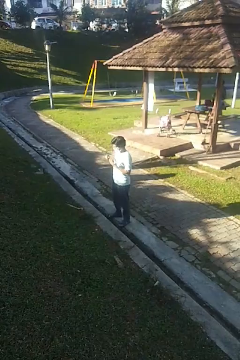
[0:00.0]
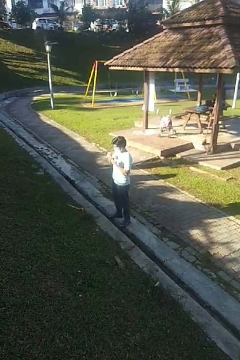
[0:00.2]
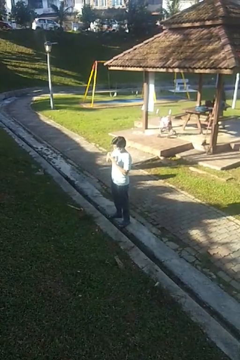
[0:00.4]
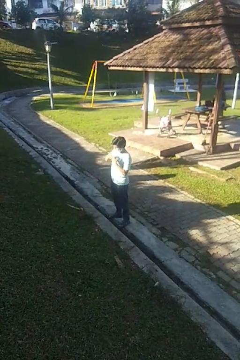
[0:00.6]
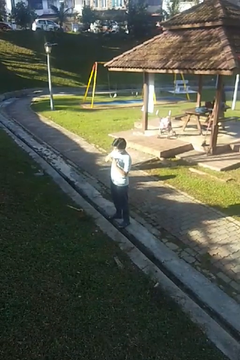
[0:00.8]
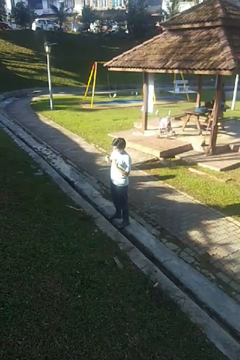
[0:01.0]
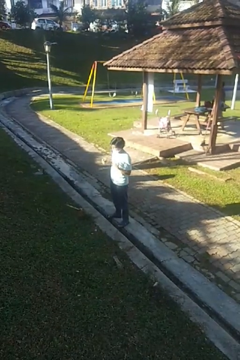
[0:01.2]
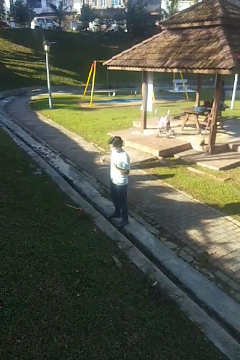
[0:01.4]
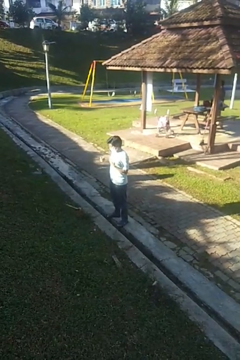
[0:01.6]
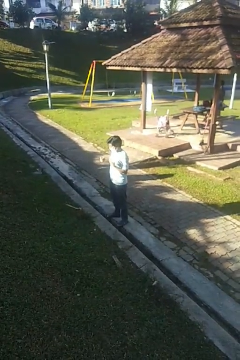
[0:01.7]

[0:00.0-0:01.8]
person puts on ring

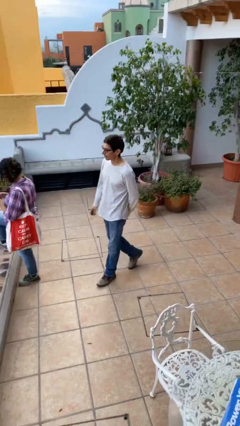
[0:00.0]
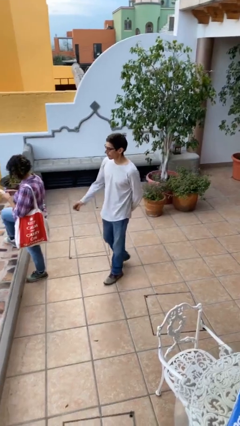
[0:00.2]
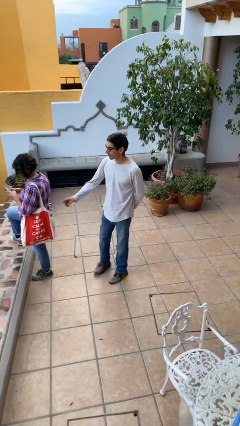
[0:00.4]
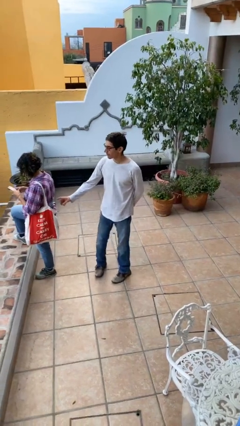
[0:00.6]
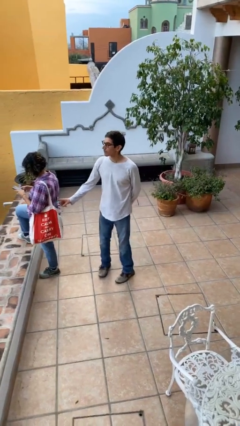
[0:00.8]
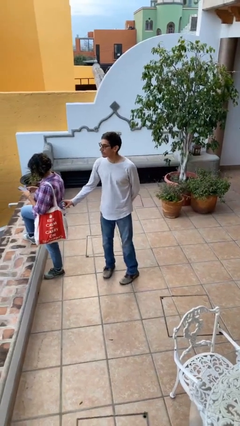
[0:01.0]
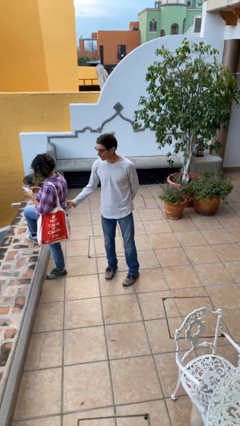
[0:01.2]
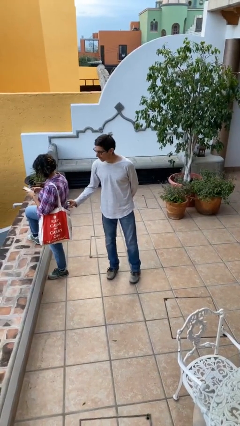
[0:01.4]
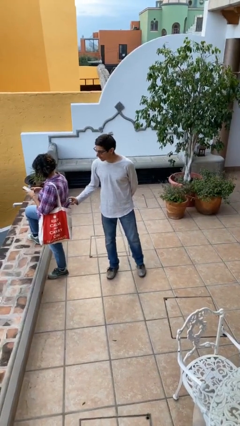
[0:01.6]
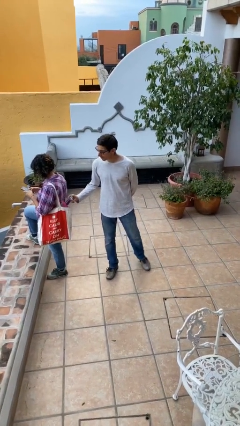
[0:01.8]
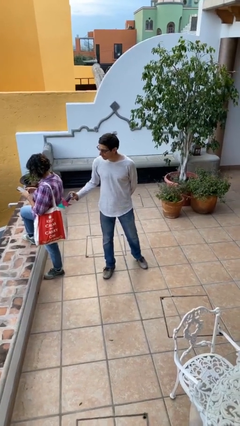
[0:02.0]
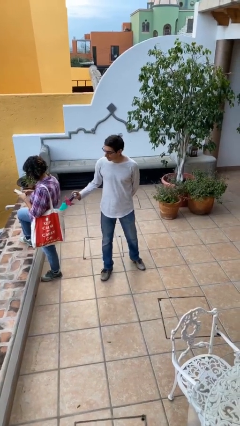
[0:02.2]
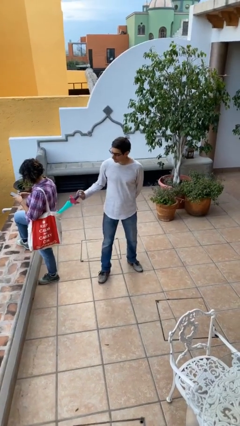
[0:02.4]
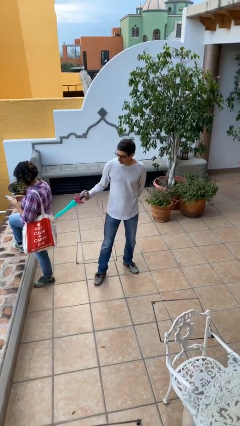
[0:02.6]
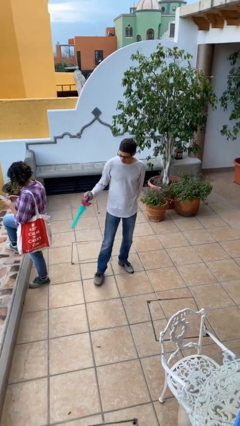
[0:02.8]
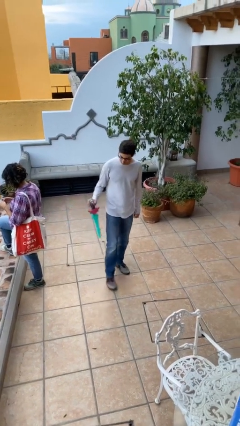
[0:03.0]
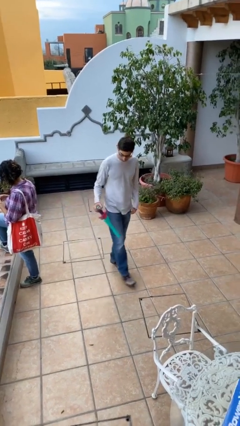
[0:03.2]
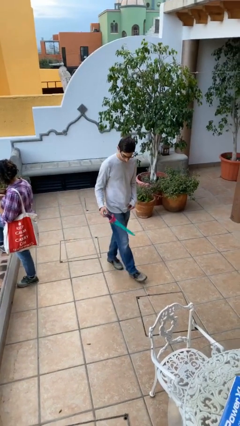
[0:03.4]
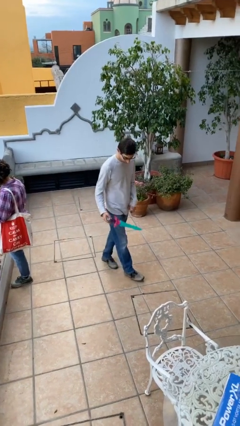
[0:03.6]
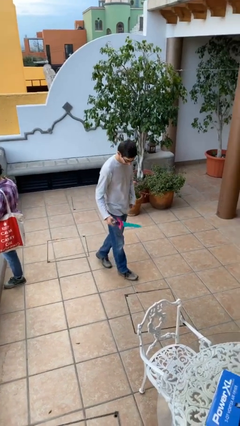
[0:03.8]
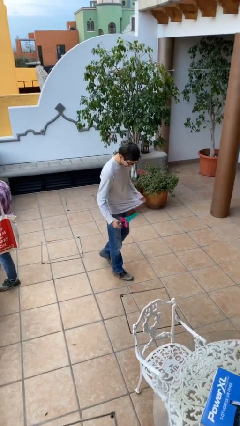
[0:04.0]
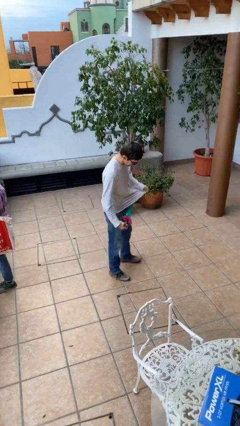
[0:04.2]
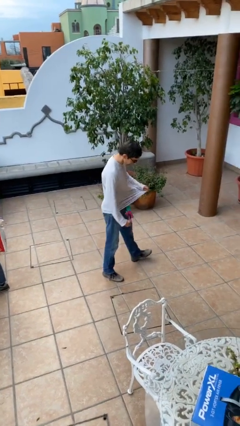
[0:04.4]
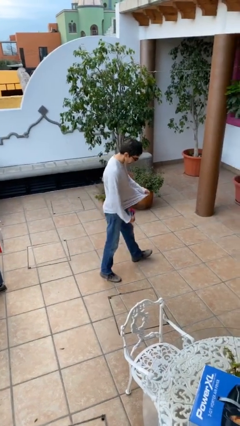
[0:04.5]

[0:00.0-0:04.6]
person steals object from person

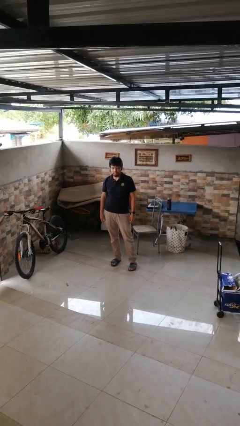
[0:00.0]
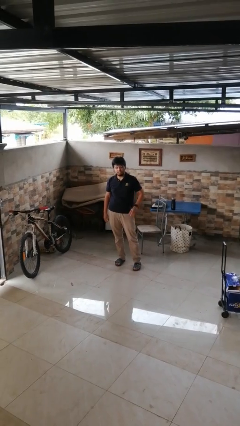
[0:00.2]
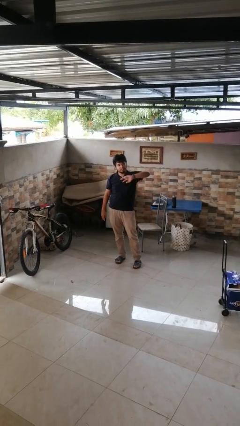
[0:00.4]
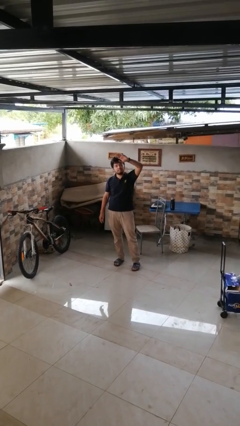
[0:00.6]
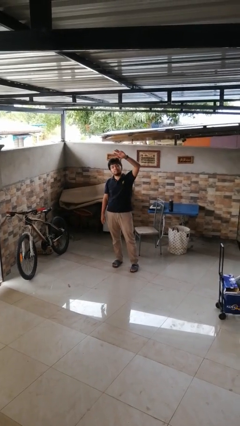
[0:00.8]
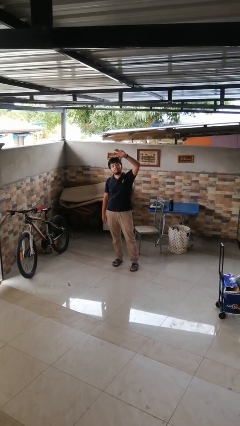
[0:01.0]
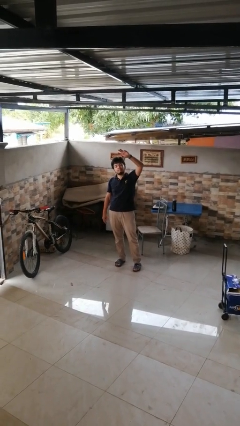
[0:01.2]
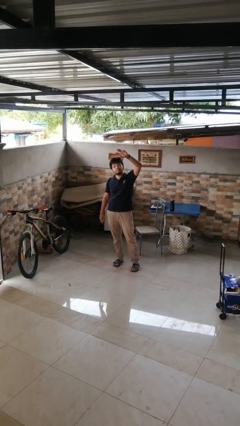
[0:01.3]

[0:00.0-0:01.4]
person gestures swipe up

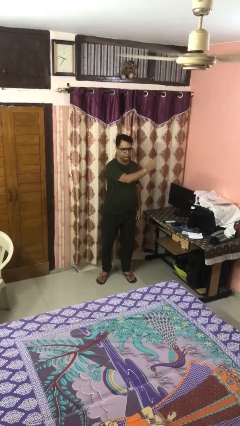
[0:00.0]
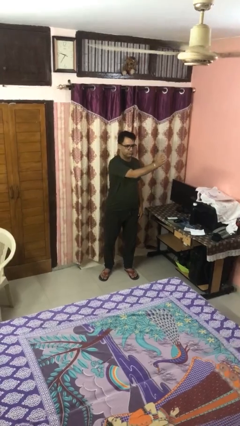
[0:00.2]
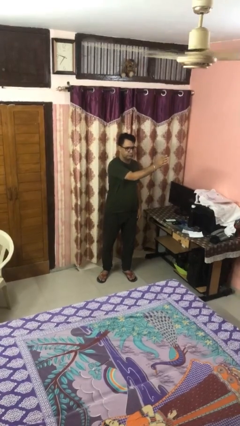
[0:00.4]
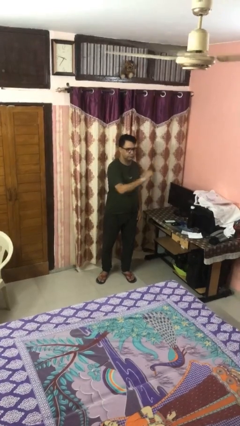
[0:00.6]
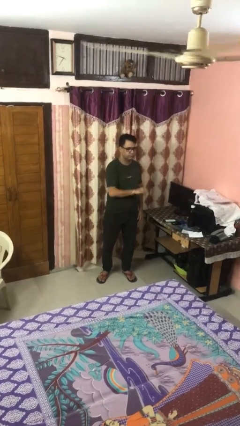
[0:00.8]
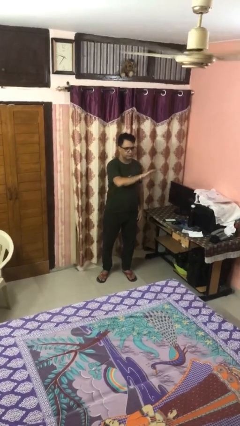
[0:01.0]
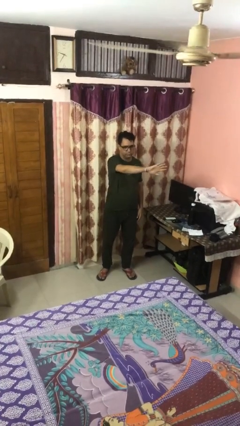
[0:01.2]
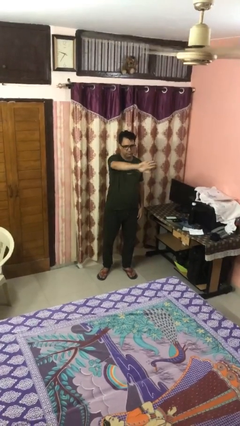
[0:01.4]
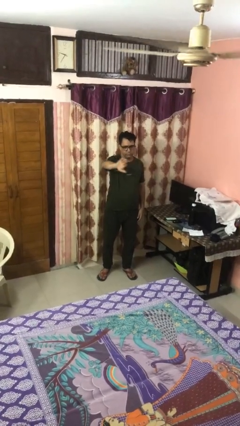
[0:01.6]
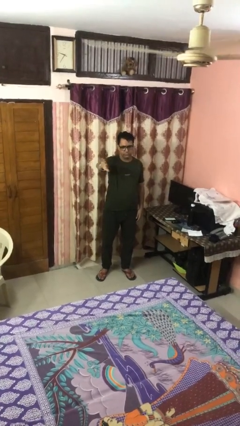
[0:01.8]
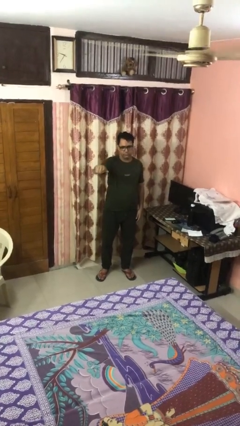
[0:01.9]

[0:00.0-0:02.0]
person gestures swipe right

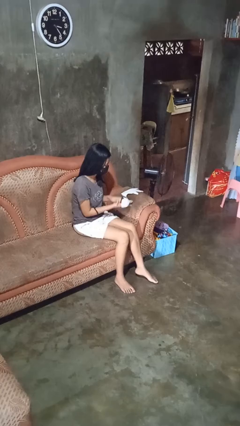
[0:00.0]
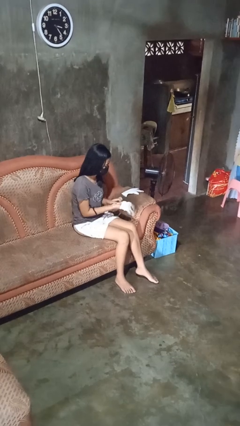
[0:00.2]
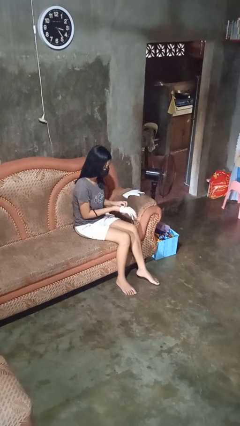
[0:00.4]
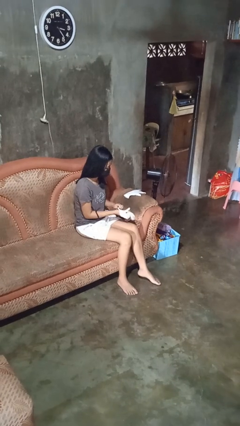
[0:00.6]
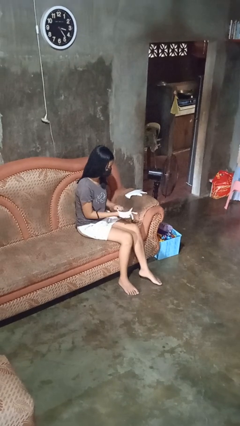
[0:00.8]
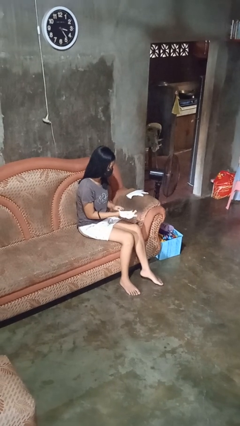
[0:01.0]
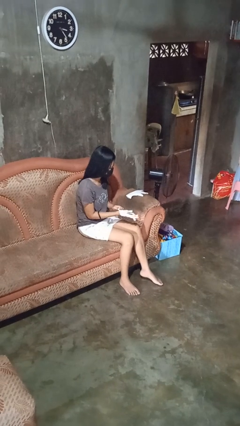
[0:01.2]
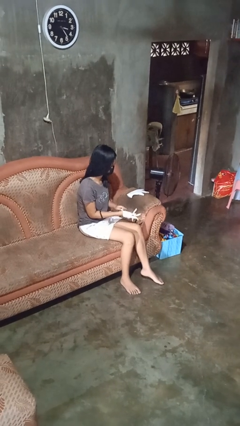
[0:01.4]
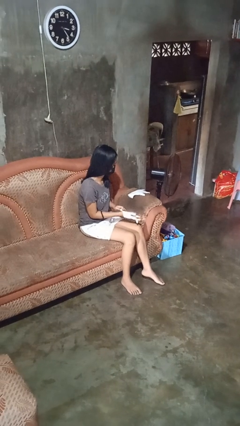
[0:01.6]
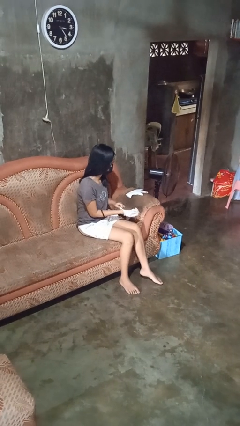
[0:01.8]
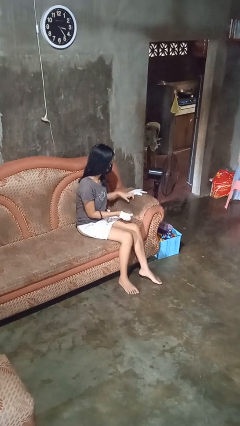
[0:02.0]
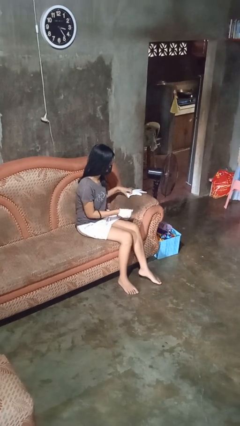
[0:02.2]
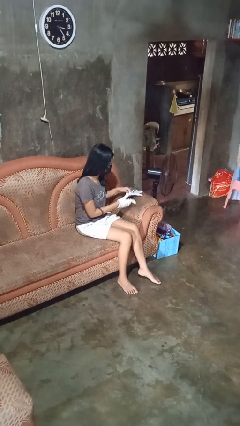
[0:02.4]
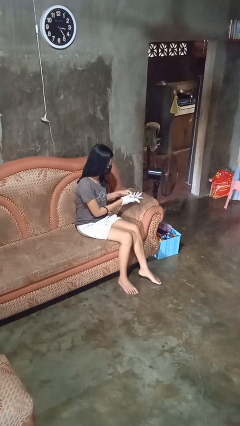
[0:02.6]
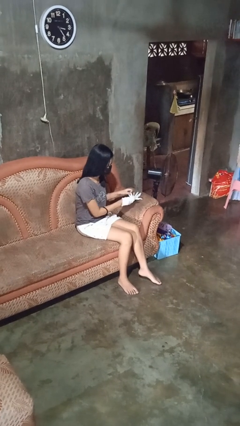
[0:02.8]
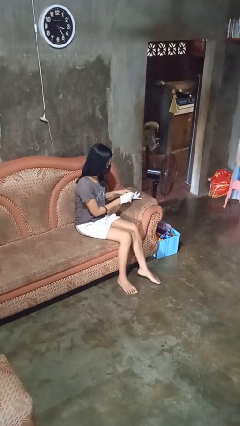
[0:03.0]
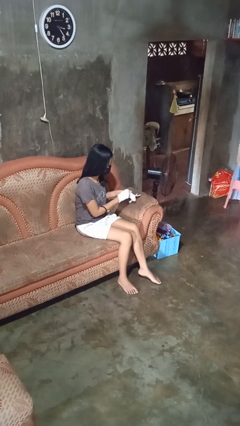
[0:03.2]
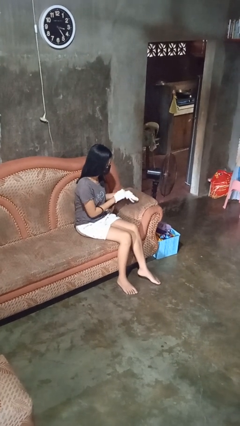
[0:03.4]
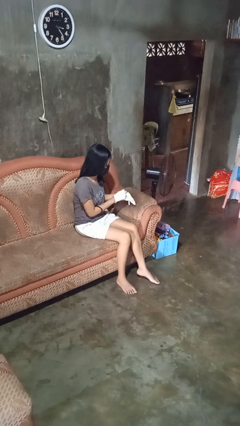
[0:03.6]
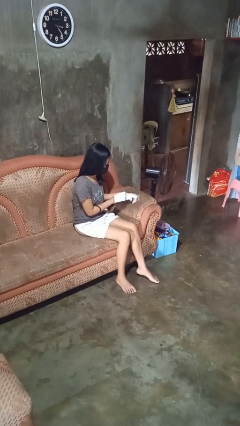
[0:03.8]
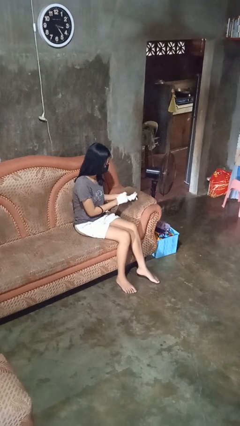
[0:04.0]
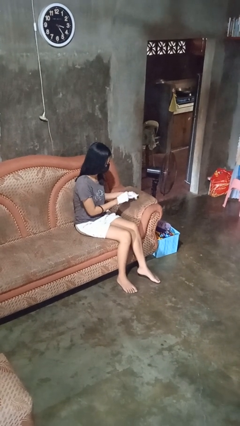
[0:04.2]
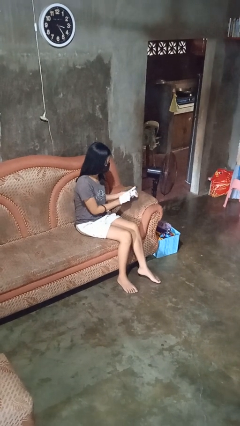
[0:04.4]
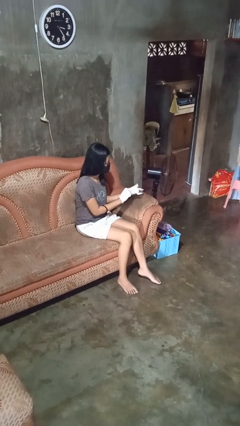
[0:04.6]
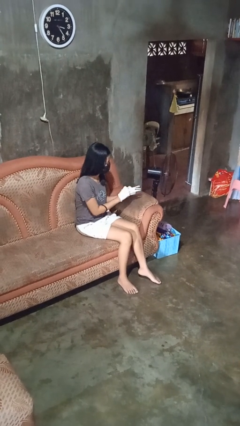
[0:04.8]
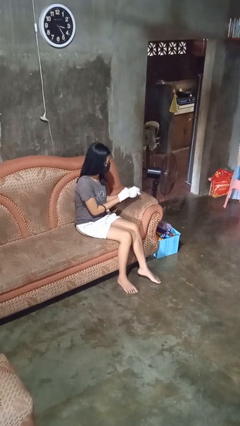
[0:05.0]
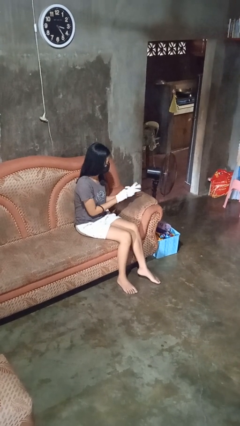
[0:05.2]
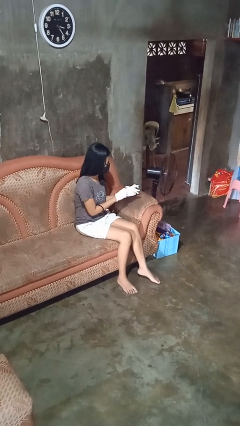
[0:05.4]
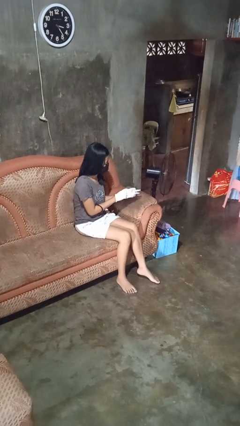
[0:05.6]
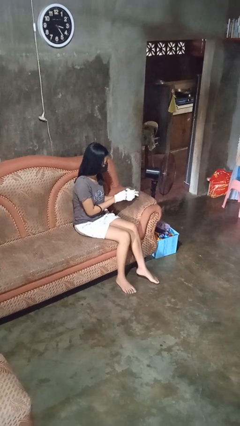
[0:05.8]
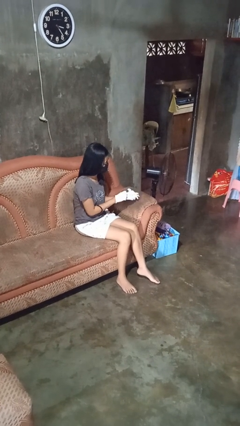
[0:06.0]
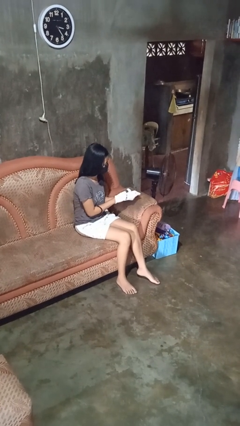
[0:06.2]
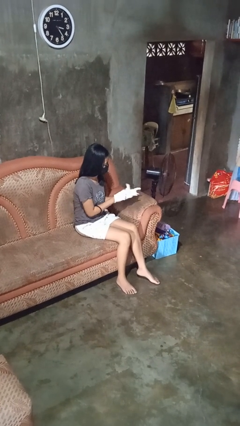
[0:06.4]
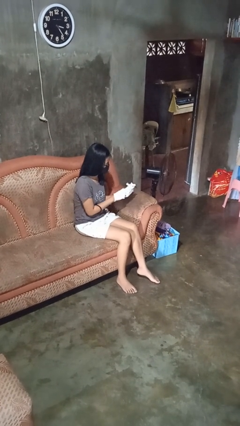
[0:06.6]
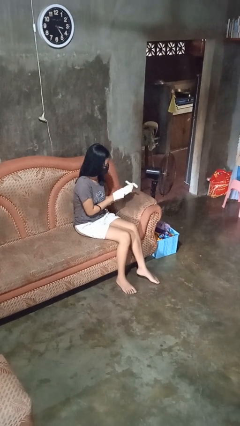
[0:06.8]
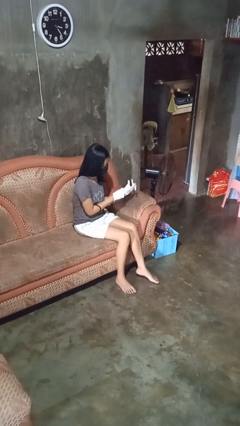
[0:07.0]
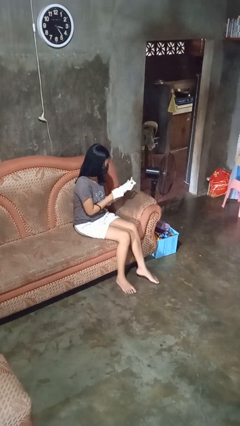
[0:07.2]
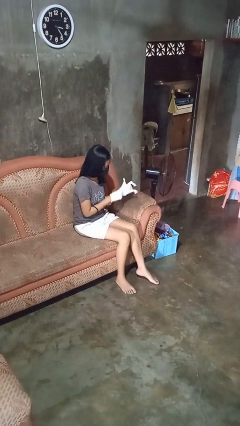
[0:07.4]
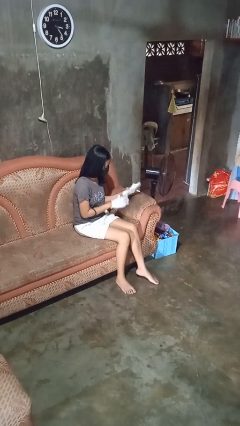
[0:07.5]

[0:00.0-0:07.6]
person puts on gloves

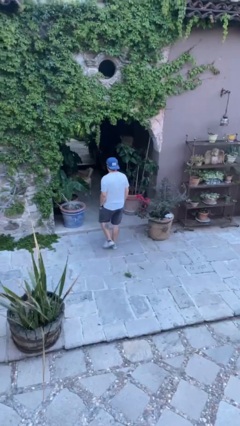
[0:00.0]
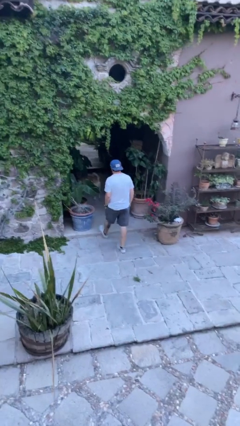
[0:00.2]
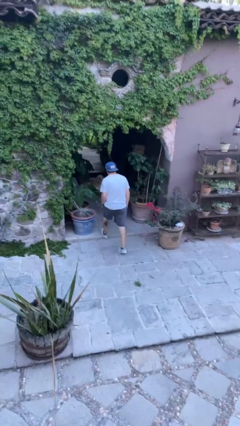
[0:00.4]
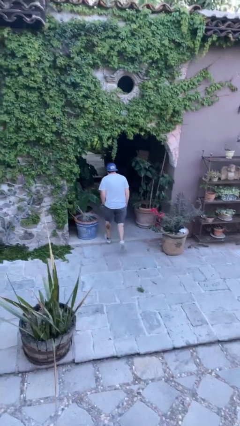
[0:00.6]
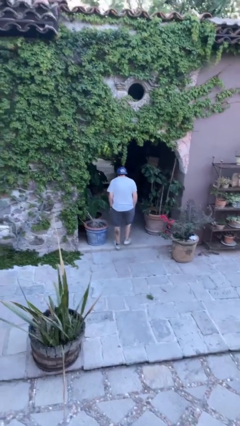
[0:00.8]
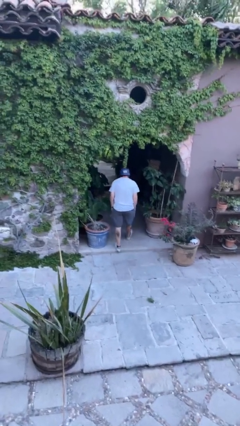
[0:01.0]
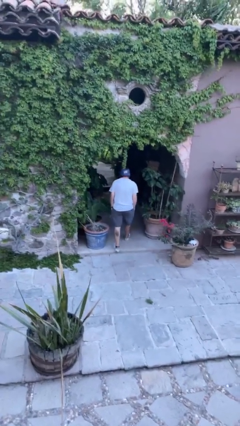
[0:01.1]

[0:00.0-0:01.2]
person exits scene through structure
